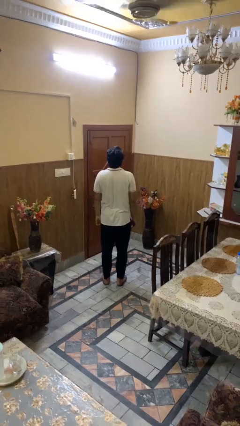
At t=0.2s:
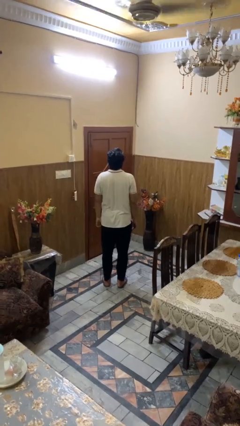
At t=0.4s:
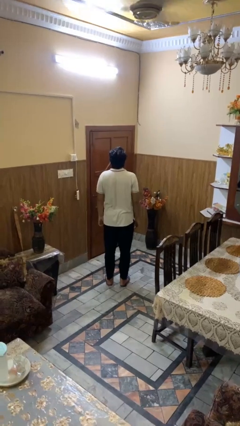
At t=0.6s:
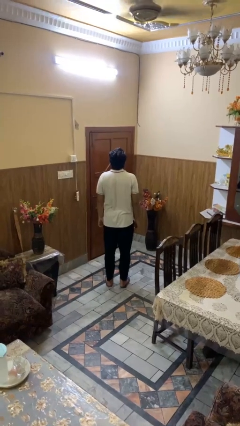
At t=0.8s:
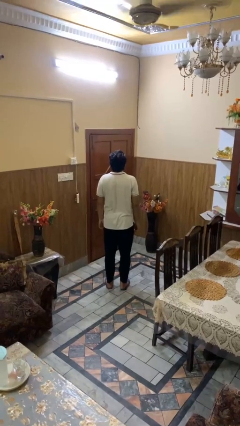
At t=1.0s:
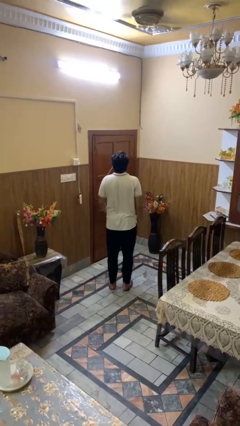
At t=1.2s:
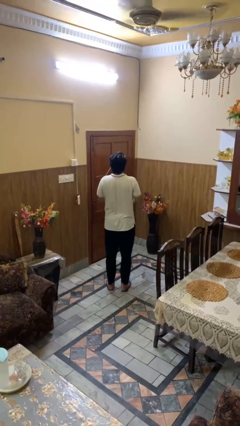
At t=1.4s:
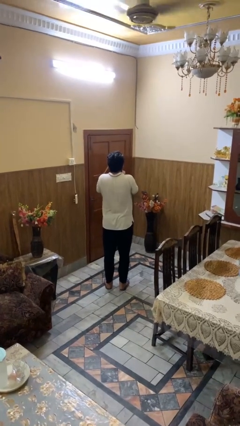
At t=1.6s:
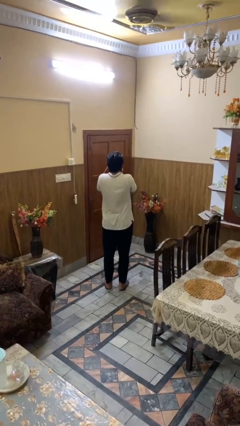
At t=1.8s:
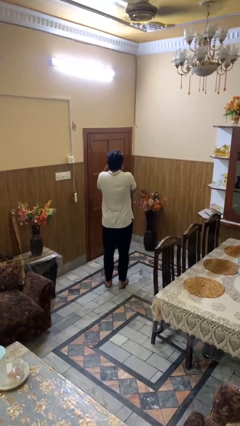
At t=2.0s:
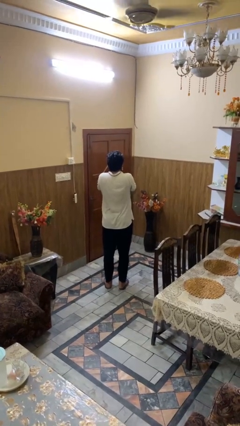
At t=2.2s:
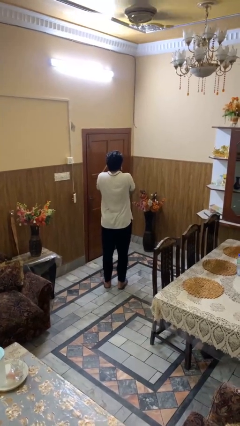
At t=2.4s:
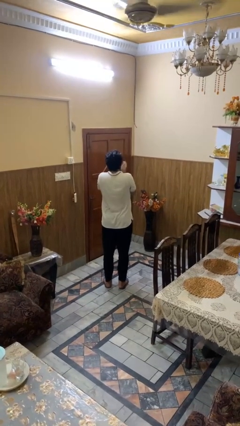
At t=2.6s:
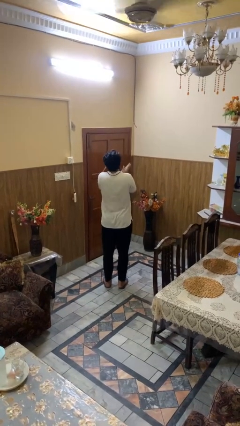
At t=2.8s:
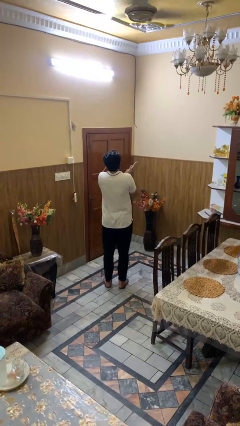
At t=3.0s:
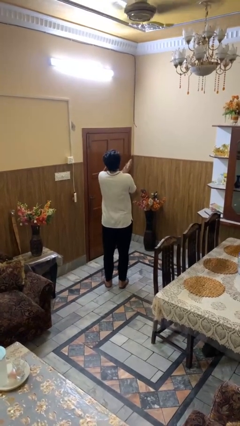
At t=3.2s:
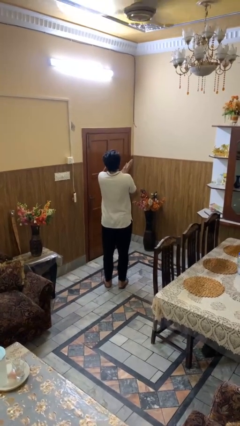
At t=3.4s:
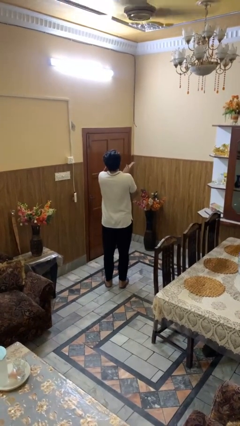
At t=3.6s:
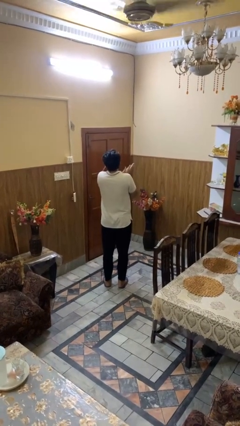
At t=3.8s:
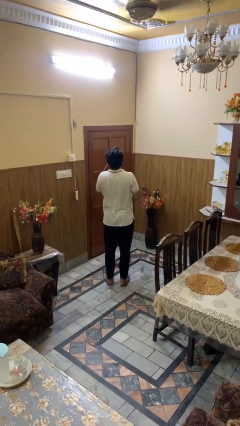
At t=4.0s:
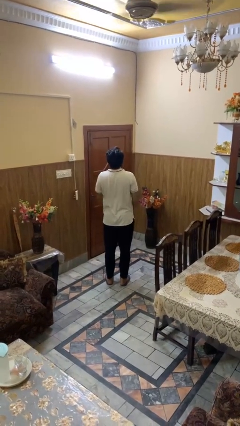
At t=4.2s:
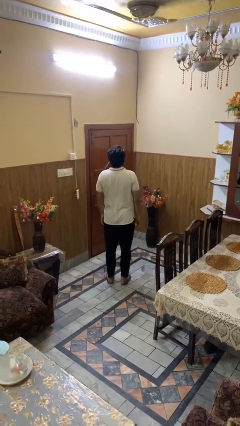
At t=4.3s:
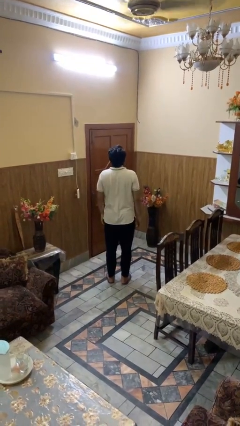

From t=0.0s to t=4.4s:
person blows into hands

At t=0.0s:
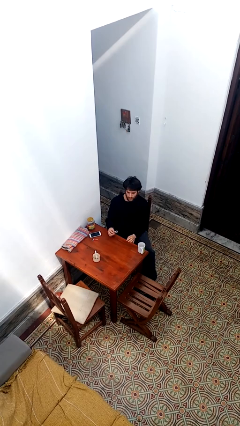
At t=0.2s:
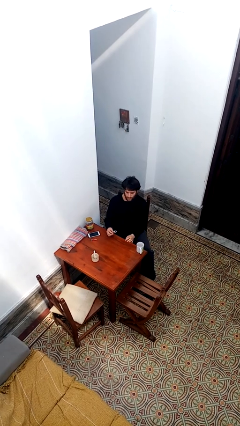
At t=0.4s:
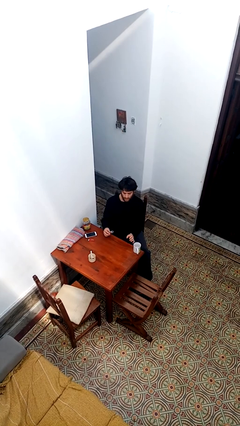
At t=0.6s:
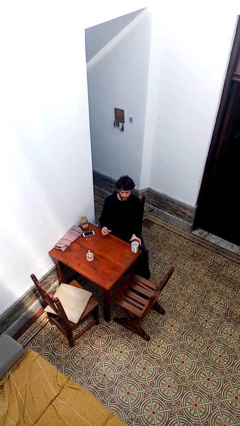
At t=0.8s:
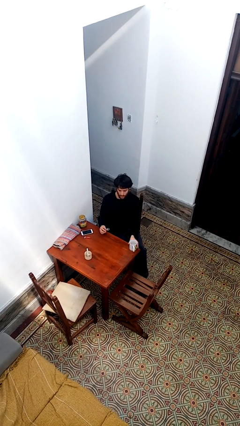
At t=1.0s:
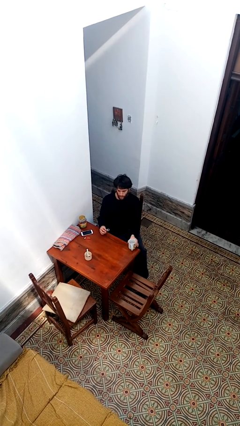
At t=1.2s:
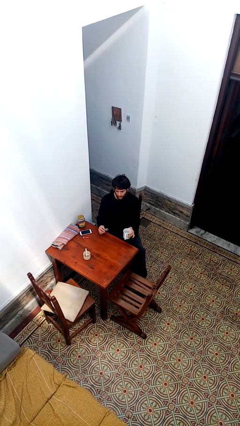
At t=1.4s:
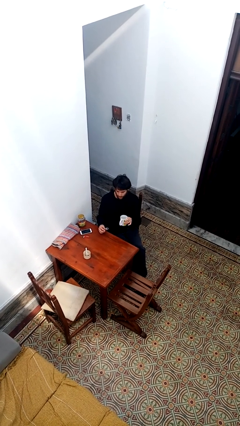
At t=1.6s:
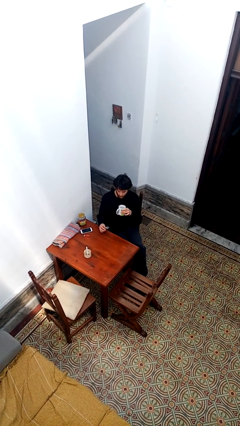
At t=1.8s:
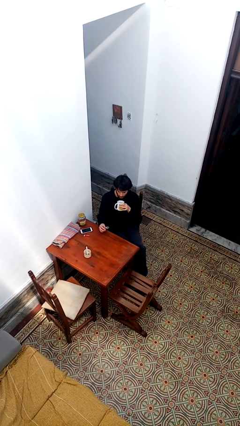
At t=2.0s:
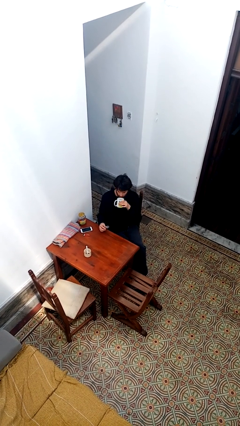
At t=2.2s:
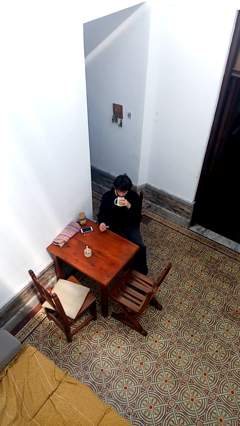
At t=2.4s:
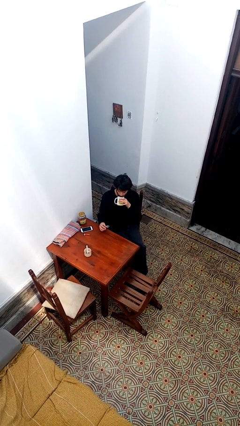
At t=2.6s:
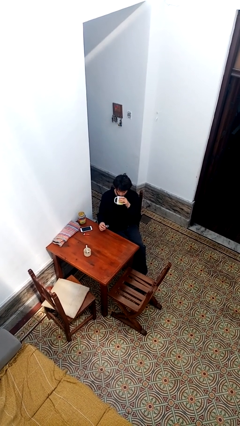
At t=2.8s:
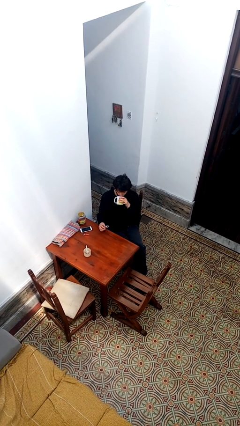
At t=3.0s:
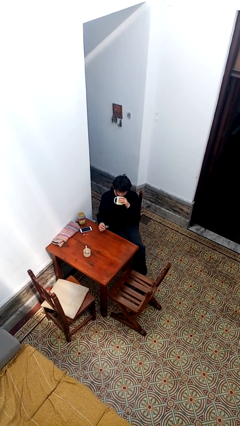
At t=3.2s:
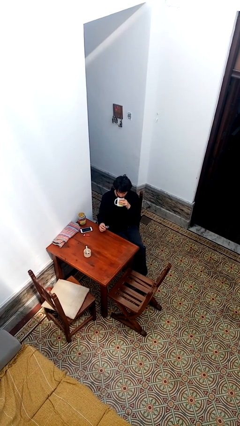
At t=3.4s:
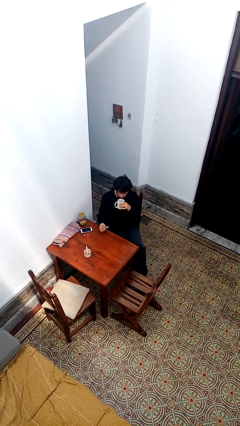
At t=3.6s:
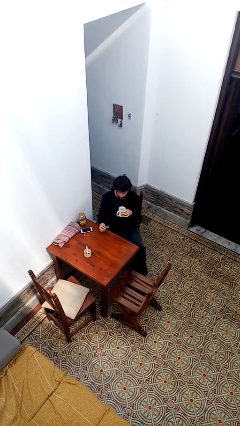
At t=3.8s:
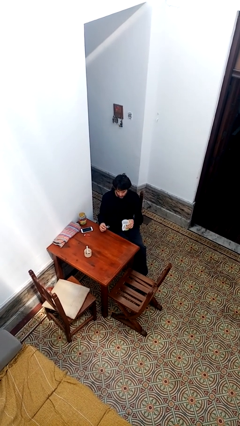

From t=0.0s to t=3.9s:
person drinks from cup

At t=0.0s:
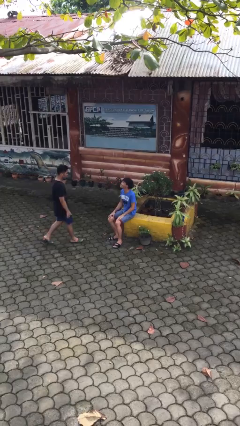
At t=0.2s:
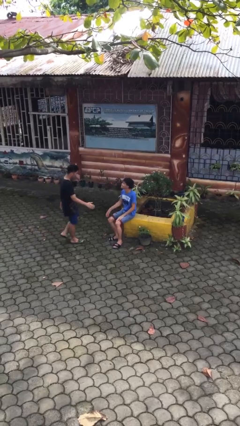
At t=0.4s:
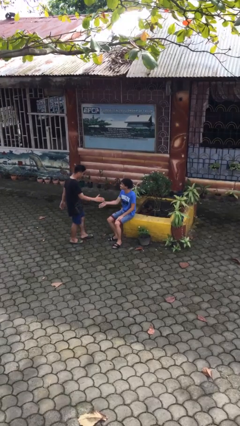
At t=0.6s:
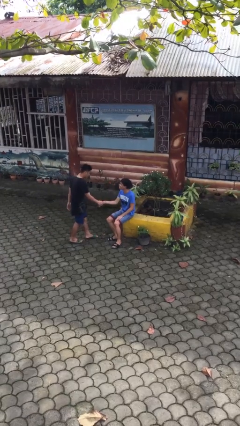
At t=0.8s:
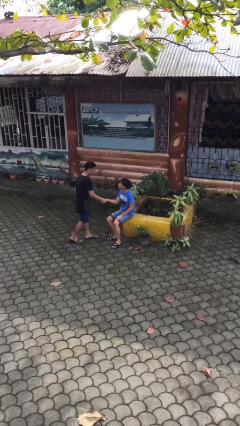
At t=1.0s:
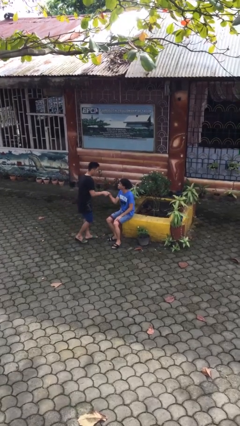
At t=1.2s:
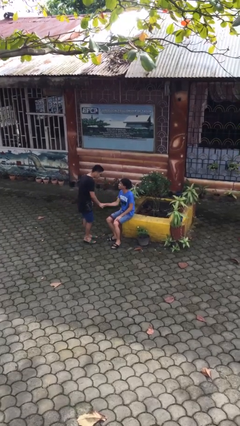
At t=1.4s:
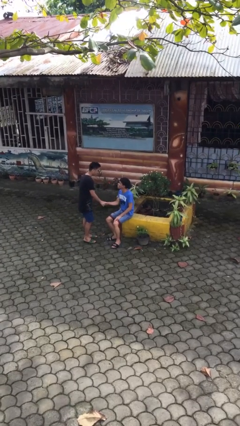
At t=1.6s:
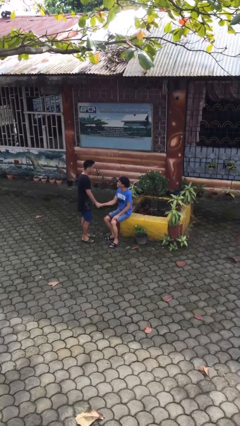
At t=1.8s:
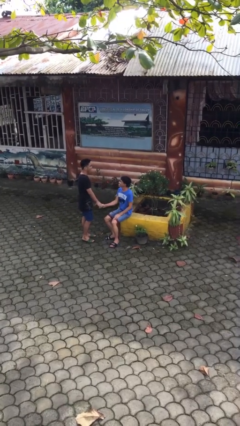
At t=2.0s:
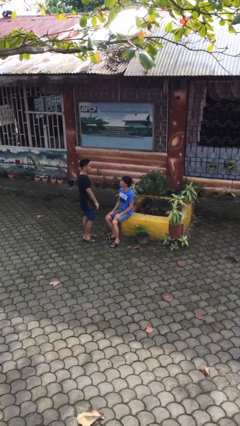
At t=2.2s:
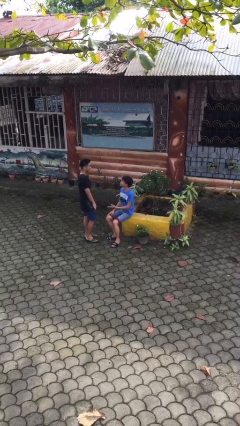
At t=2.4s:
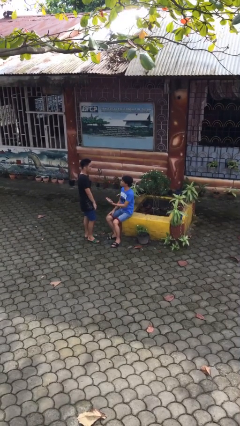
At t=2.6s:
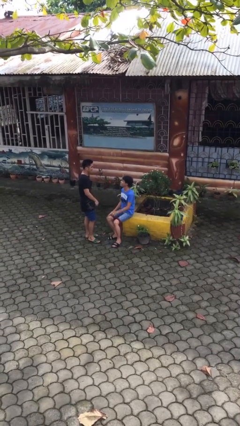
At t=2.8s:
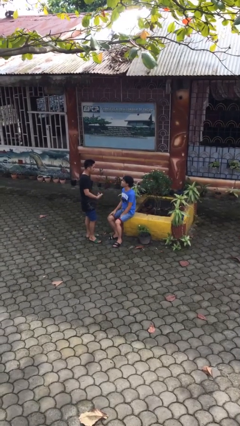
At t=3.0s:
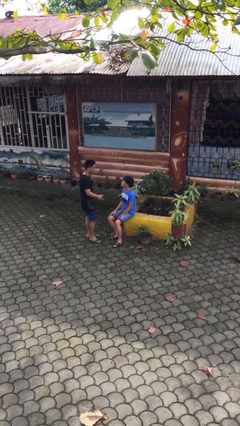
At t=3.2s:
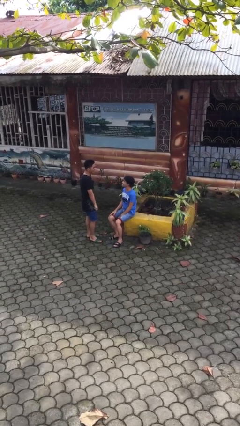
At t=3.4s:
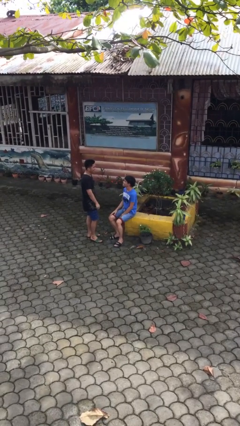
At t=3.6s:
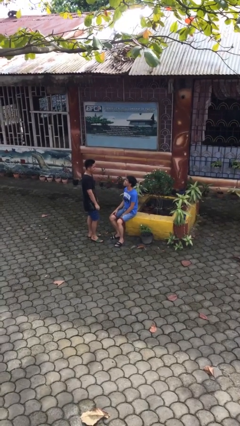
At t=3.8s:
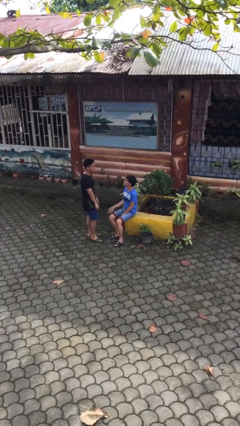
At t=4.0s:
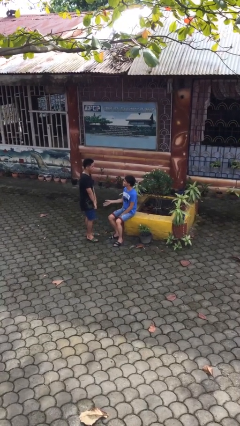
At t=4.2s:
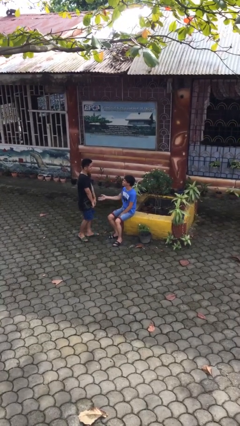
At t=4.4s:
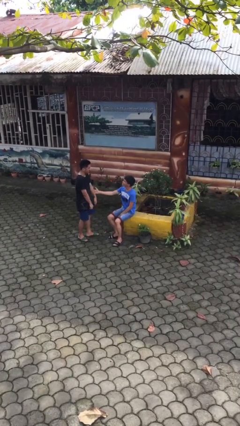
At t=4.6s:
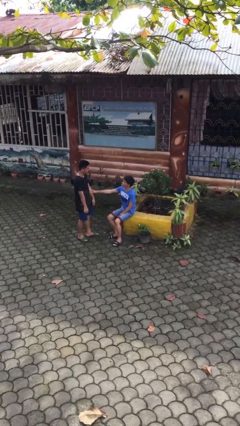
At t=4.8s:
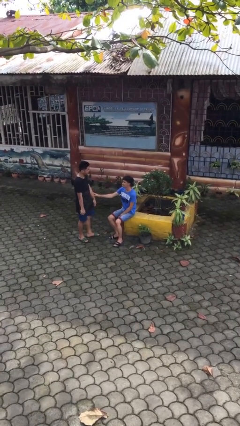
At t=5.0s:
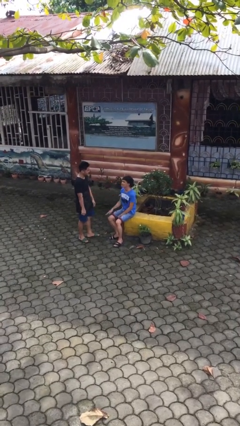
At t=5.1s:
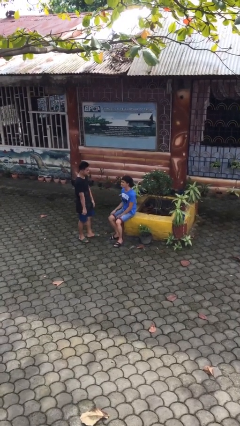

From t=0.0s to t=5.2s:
person shakes hand

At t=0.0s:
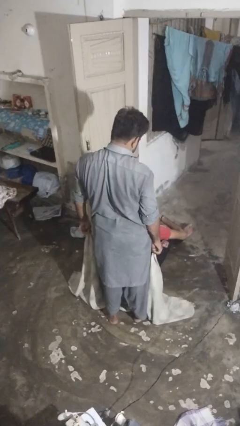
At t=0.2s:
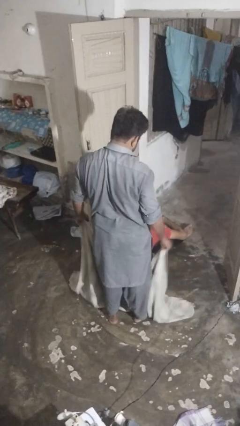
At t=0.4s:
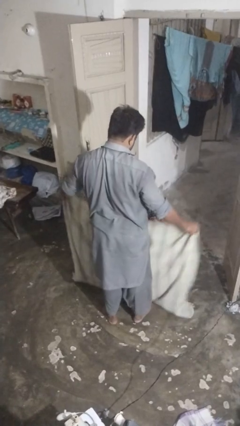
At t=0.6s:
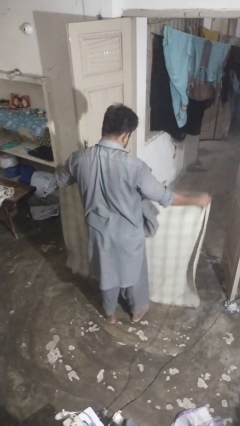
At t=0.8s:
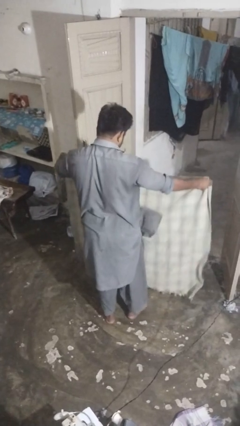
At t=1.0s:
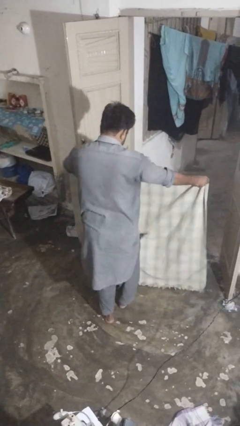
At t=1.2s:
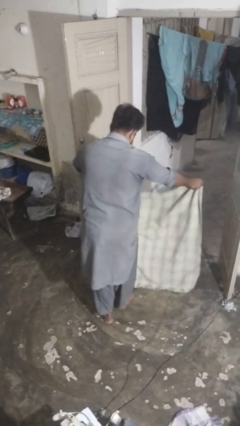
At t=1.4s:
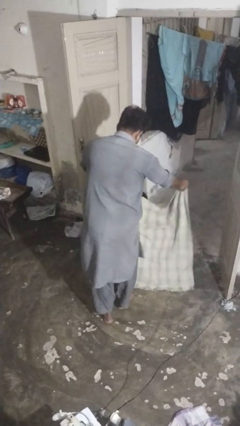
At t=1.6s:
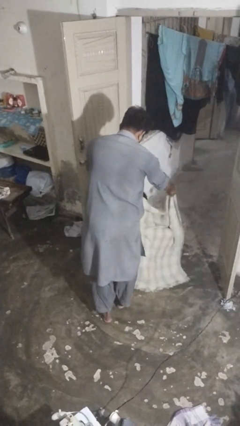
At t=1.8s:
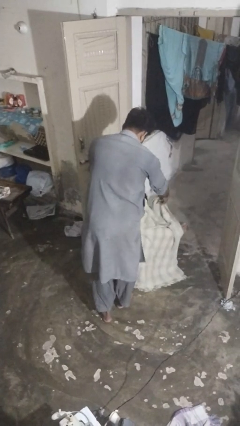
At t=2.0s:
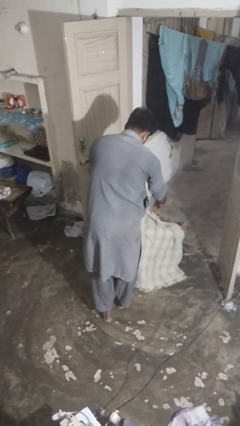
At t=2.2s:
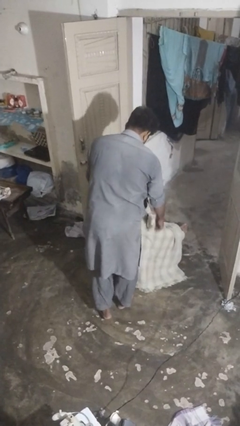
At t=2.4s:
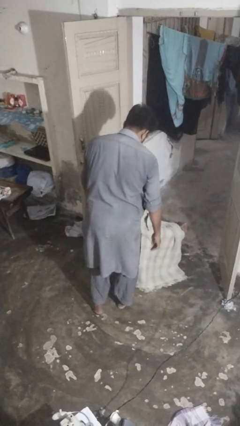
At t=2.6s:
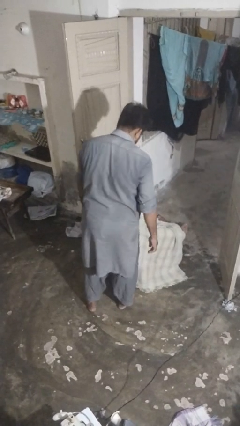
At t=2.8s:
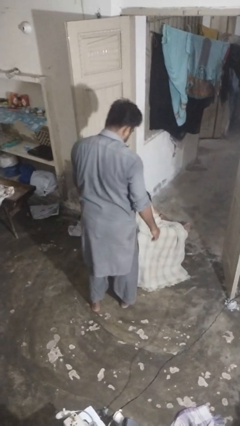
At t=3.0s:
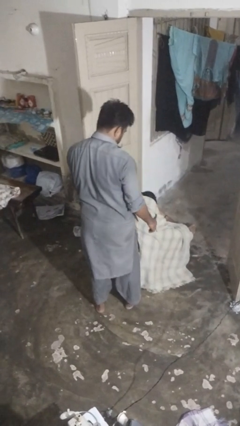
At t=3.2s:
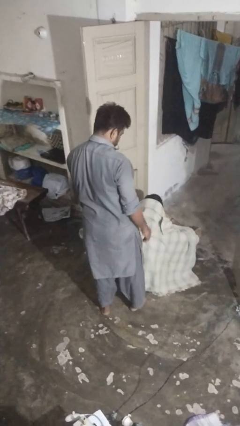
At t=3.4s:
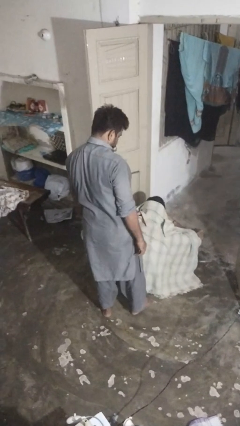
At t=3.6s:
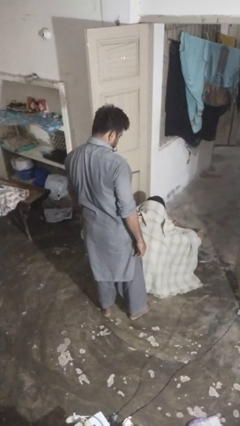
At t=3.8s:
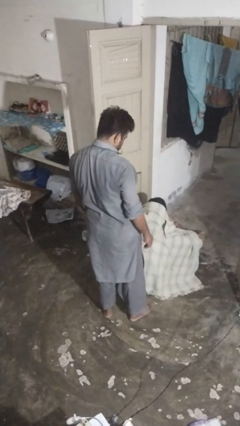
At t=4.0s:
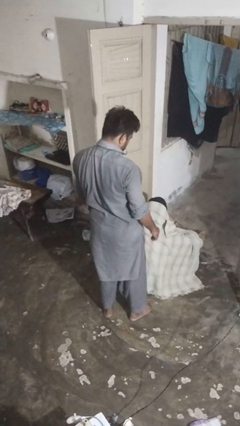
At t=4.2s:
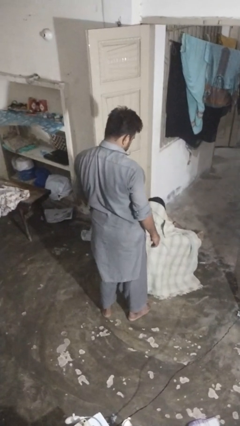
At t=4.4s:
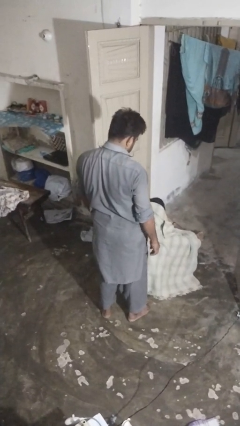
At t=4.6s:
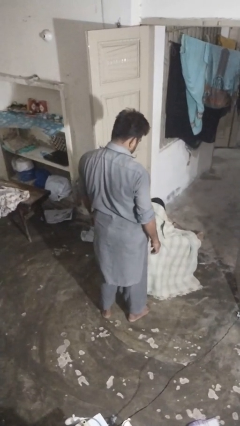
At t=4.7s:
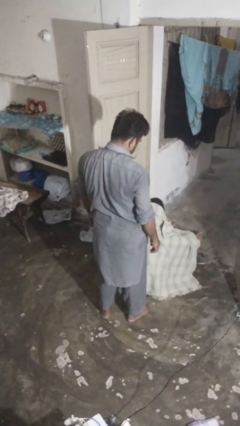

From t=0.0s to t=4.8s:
person covers friend with blanket
